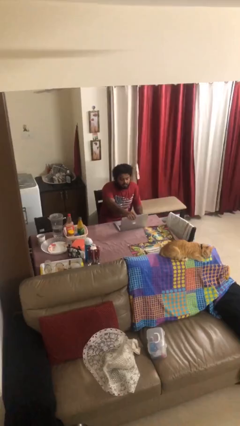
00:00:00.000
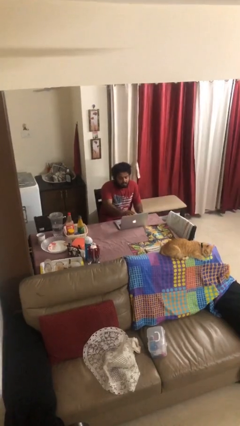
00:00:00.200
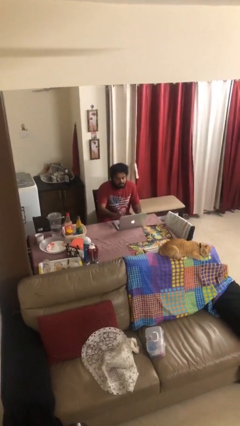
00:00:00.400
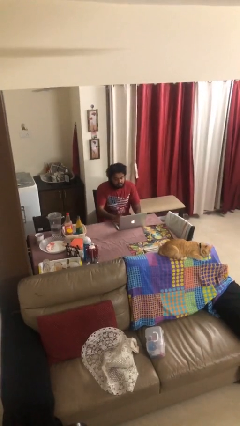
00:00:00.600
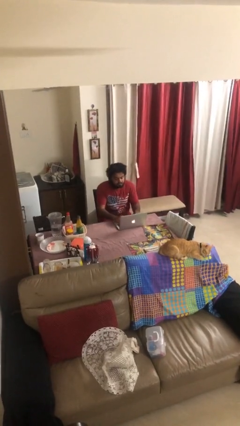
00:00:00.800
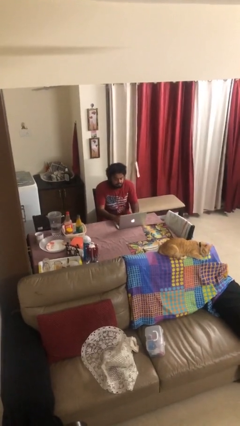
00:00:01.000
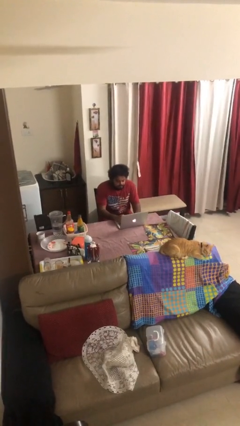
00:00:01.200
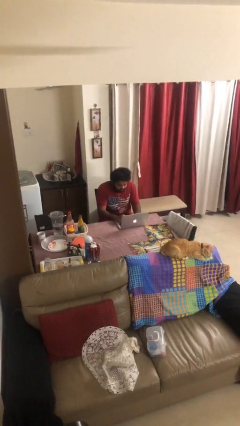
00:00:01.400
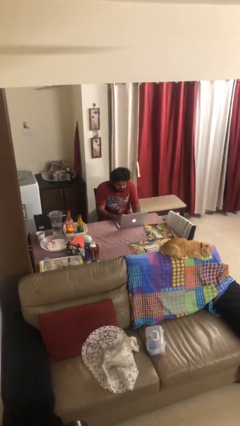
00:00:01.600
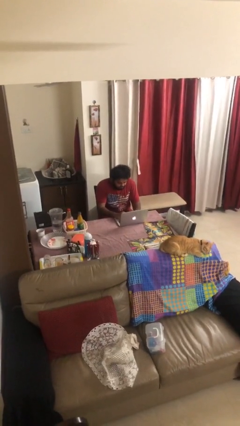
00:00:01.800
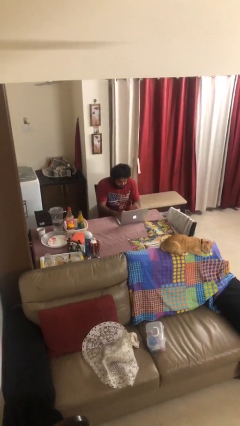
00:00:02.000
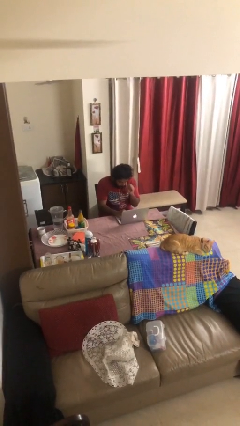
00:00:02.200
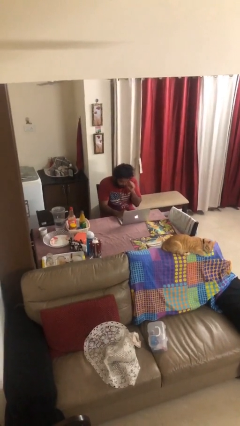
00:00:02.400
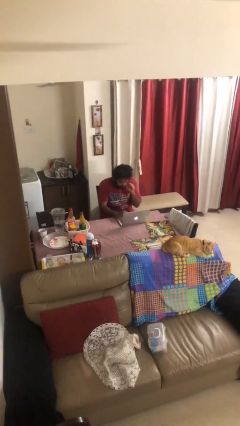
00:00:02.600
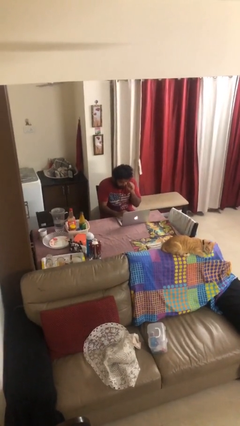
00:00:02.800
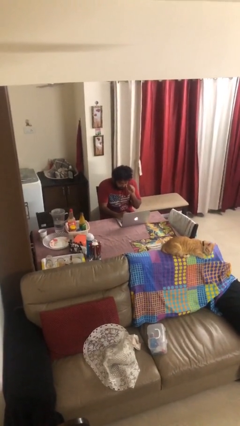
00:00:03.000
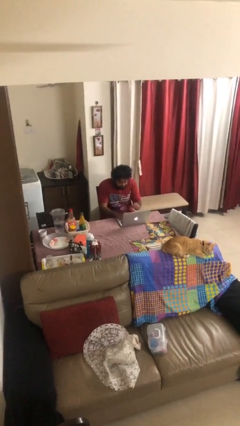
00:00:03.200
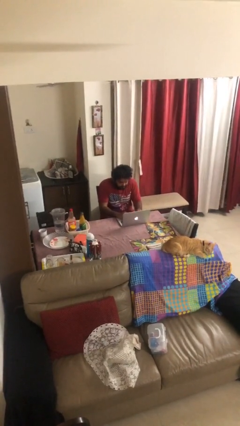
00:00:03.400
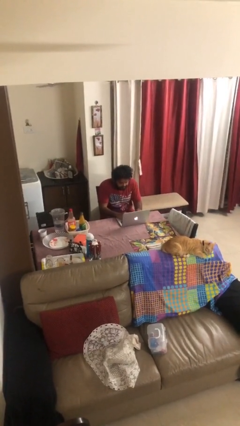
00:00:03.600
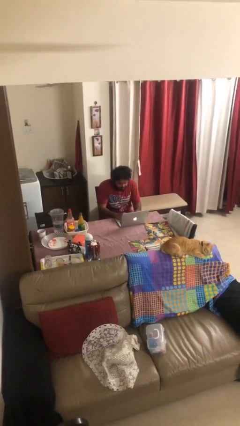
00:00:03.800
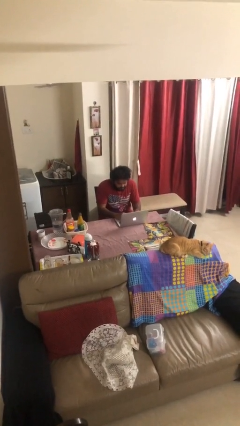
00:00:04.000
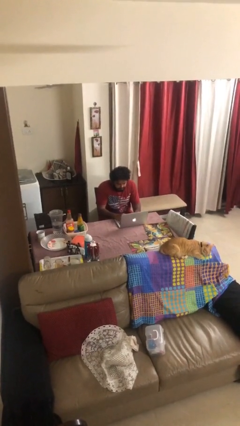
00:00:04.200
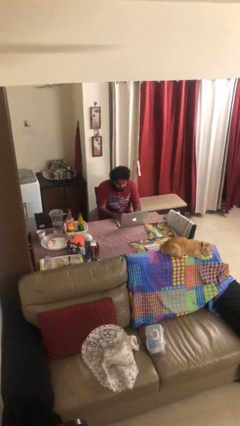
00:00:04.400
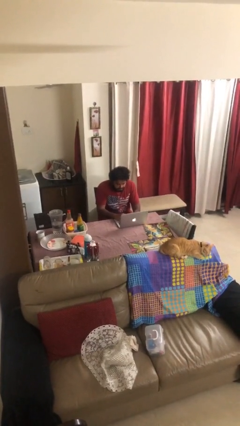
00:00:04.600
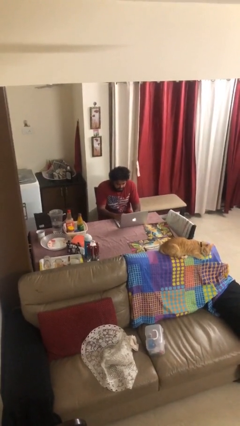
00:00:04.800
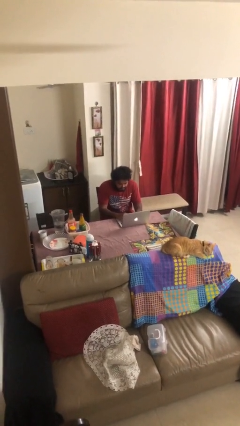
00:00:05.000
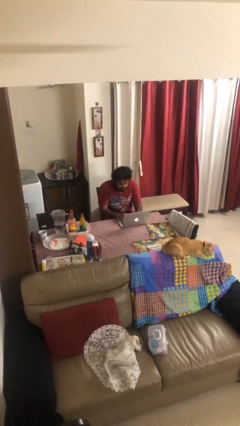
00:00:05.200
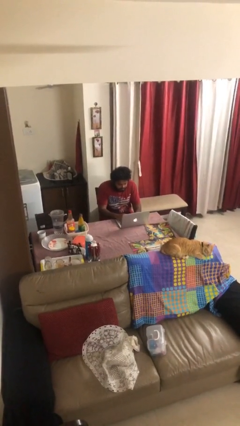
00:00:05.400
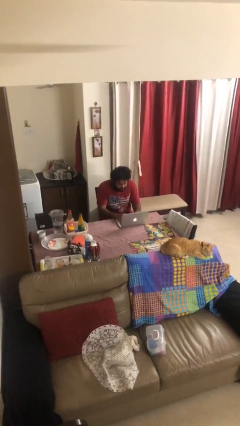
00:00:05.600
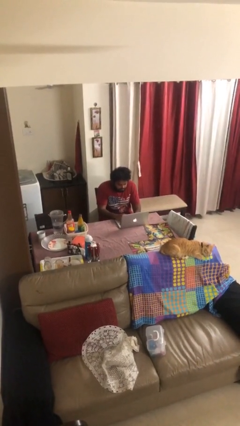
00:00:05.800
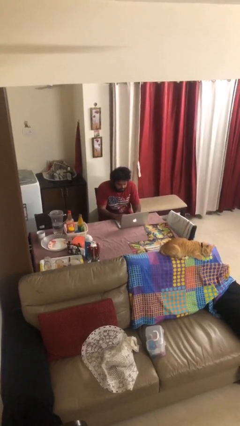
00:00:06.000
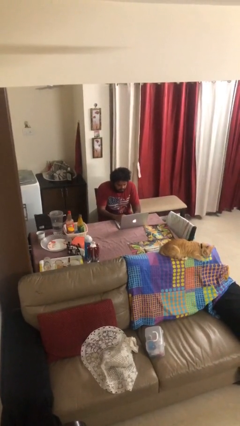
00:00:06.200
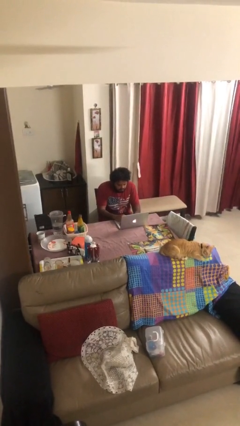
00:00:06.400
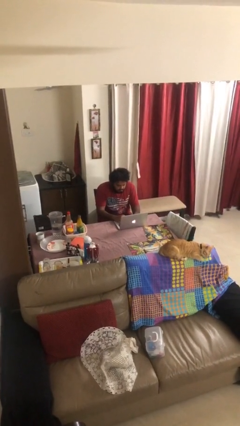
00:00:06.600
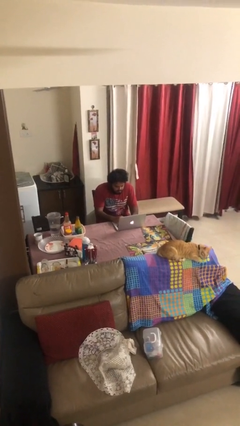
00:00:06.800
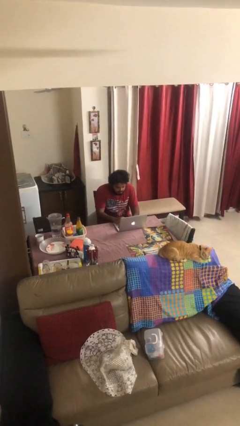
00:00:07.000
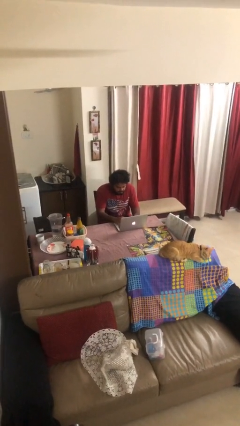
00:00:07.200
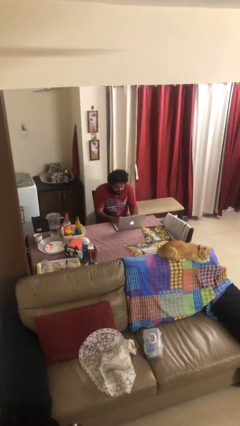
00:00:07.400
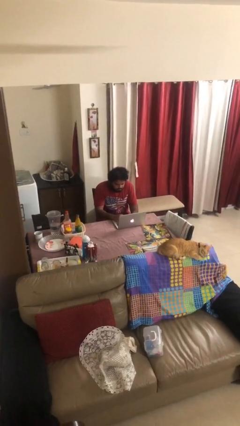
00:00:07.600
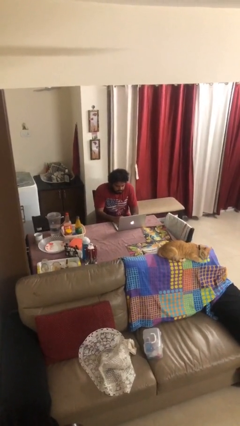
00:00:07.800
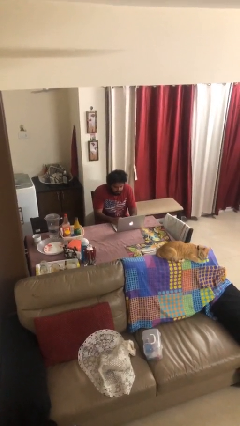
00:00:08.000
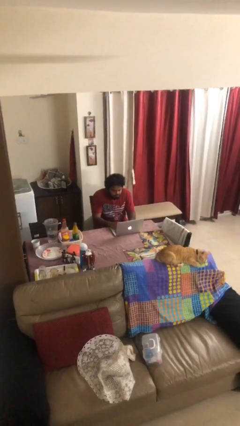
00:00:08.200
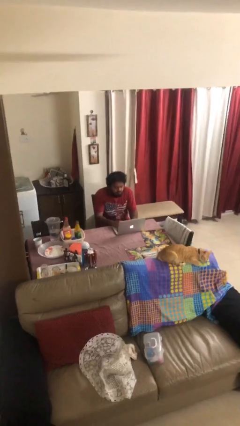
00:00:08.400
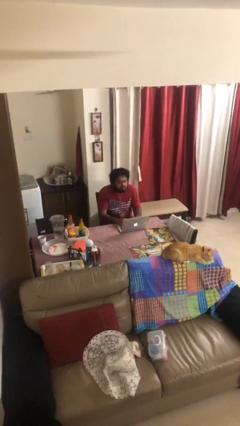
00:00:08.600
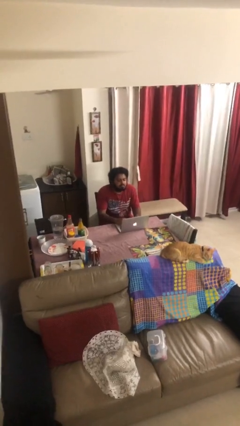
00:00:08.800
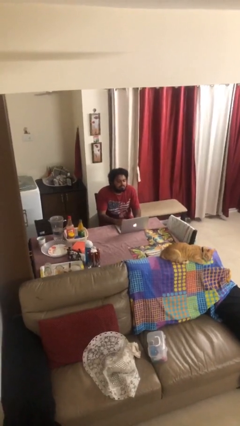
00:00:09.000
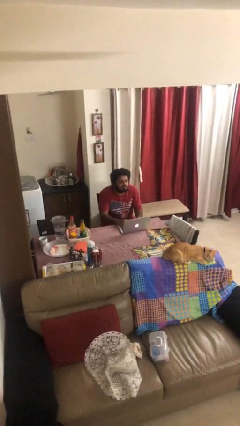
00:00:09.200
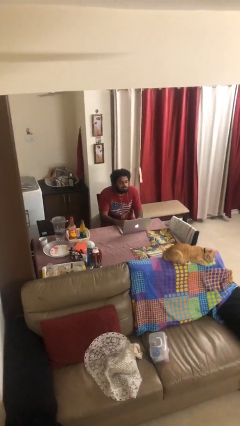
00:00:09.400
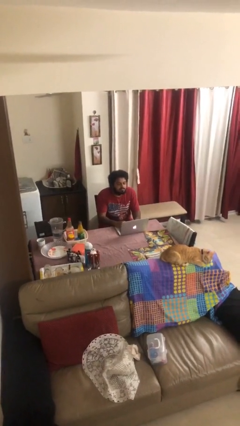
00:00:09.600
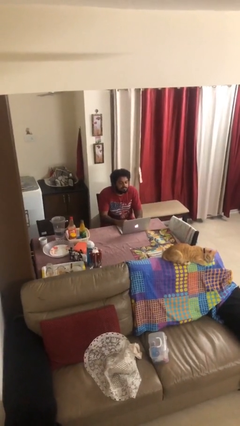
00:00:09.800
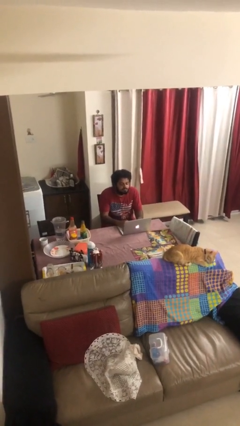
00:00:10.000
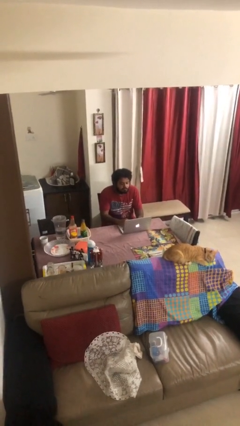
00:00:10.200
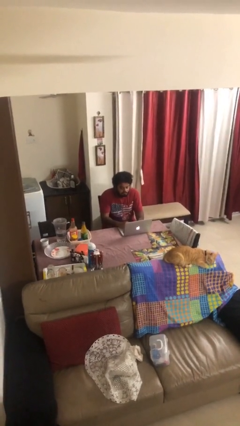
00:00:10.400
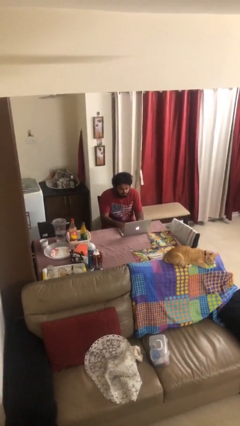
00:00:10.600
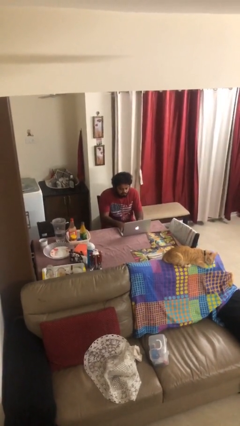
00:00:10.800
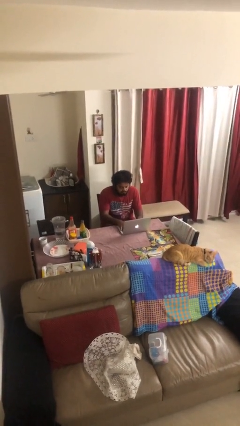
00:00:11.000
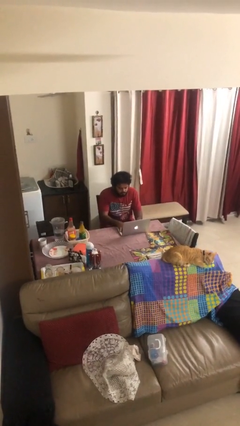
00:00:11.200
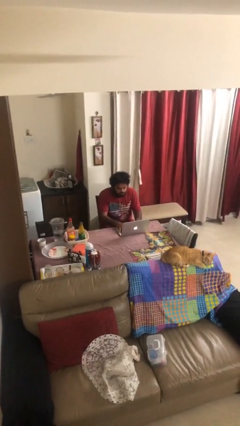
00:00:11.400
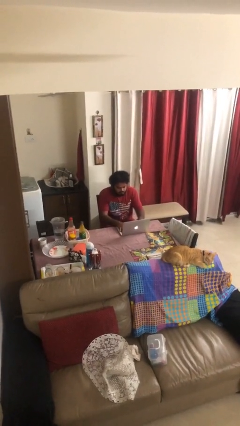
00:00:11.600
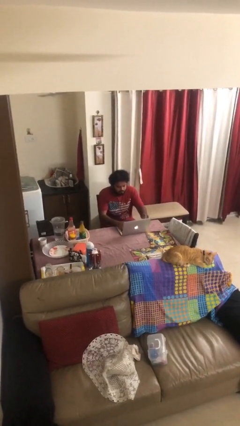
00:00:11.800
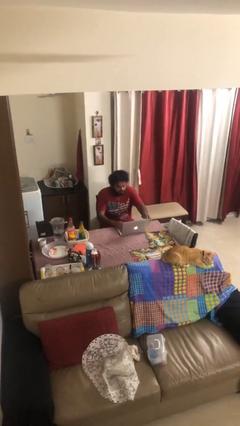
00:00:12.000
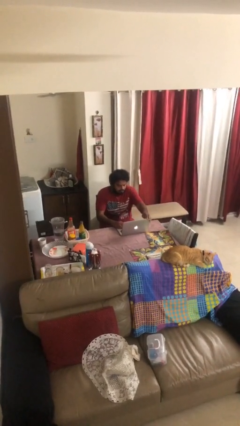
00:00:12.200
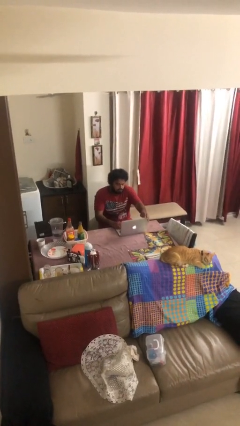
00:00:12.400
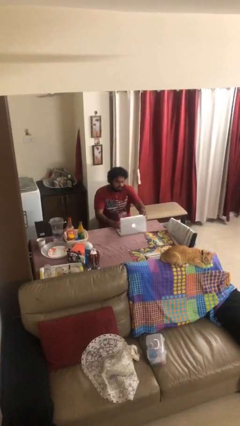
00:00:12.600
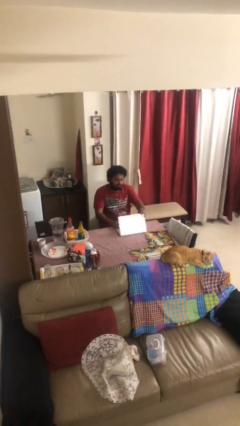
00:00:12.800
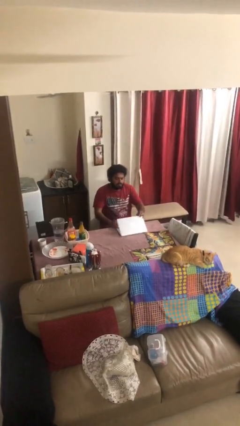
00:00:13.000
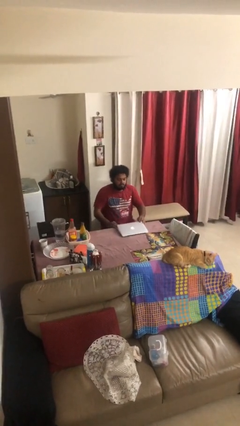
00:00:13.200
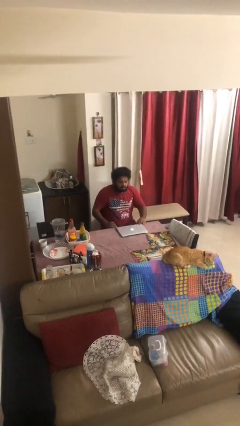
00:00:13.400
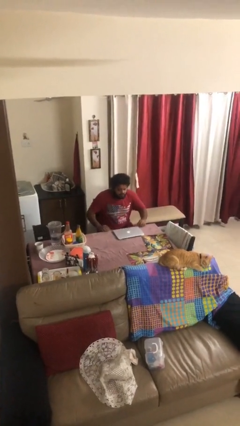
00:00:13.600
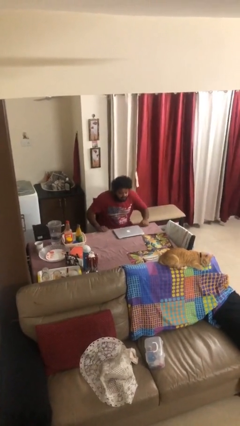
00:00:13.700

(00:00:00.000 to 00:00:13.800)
person interacts with laptop

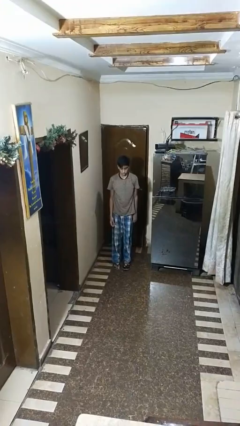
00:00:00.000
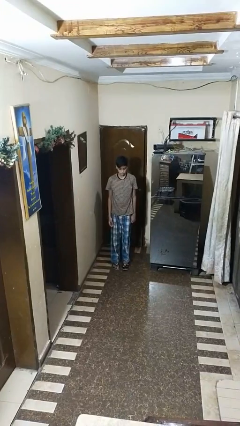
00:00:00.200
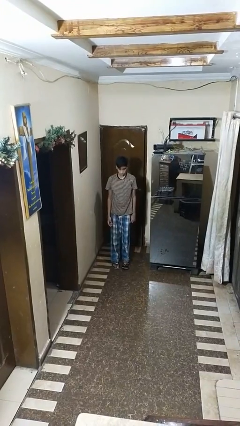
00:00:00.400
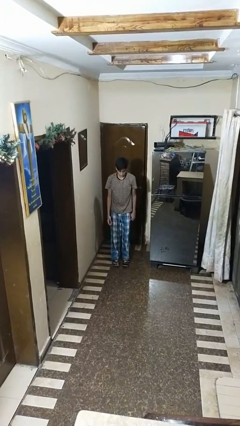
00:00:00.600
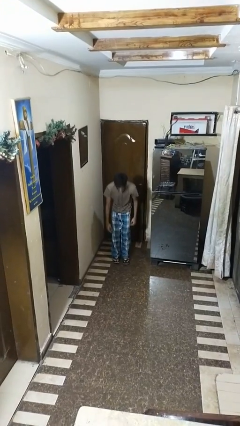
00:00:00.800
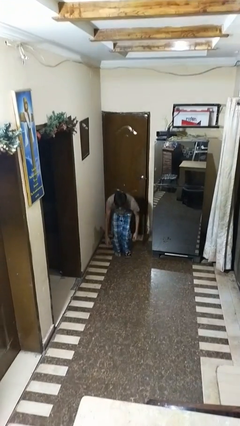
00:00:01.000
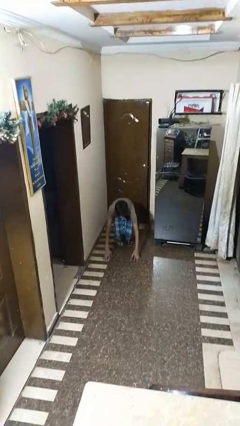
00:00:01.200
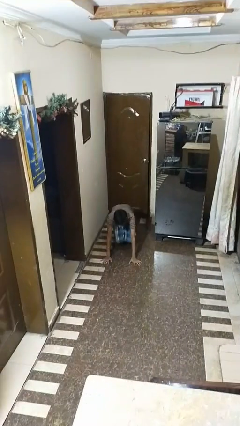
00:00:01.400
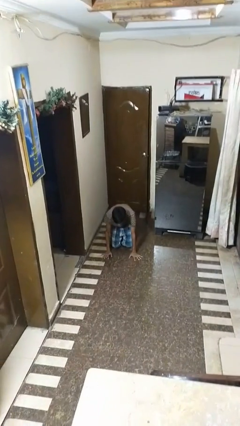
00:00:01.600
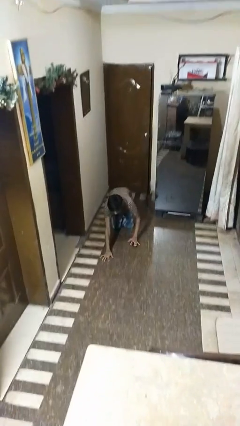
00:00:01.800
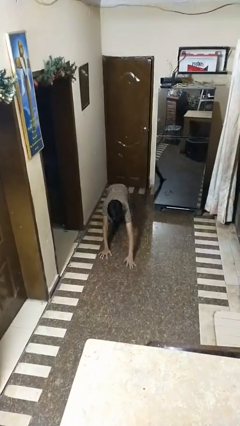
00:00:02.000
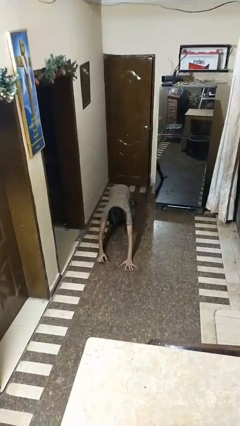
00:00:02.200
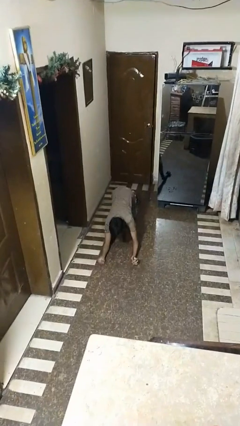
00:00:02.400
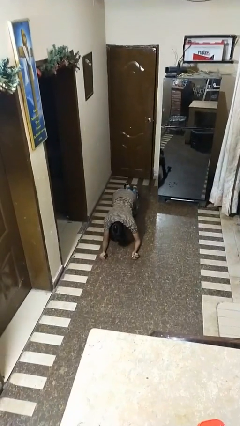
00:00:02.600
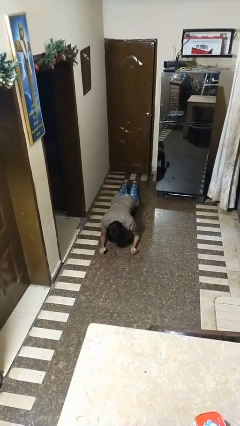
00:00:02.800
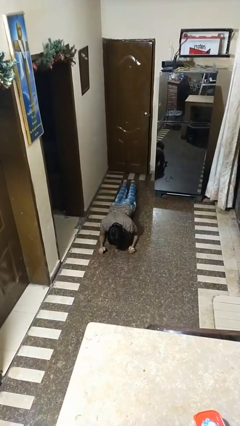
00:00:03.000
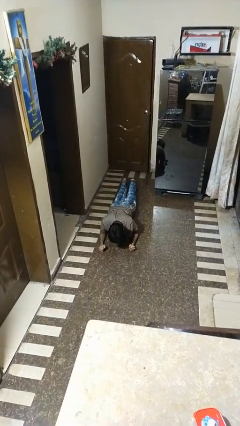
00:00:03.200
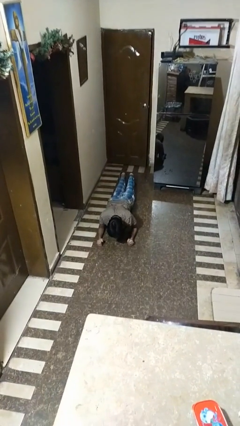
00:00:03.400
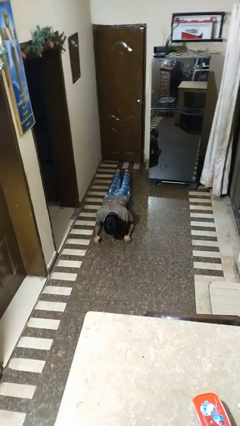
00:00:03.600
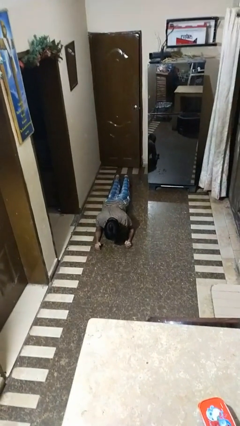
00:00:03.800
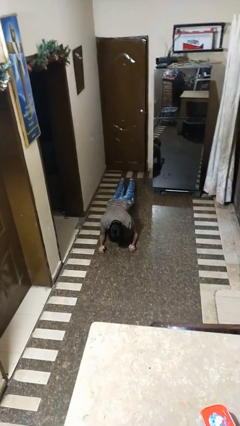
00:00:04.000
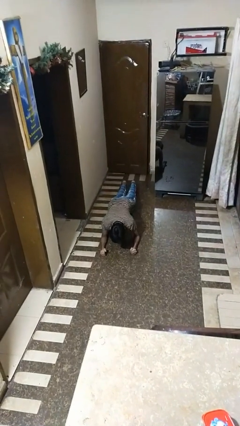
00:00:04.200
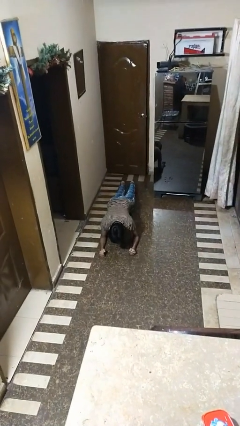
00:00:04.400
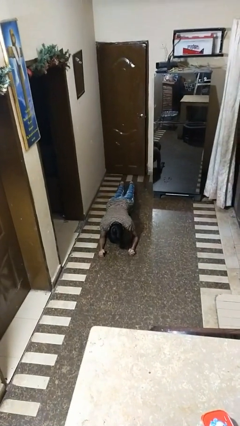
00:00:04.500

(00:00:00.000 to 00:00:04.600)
person exercises with plank
